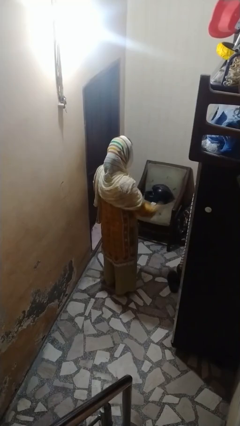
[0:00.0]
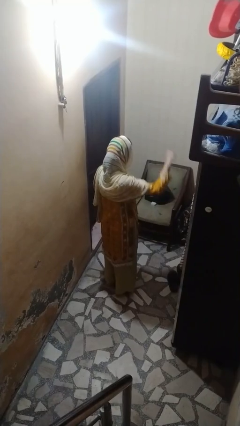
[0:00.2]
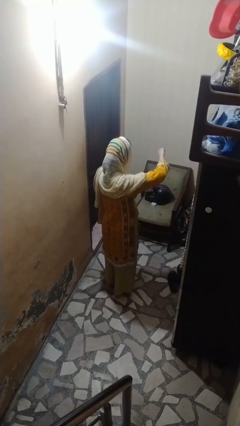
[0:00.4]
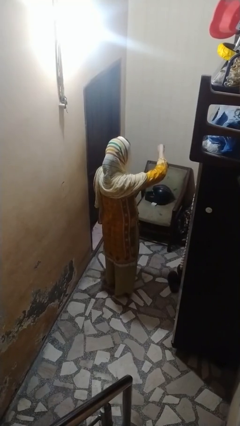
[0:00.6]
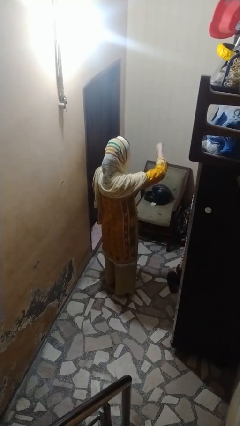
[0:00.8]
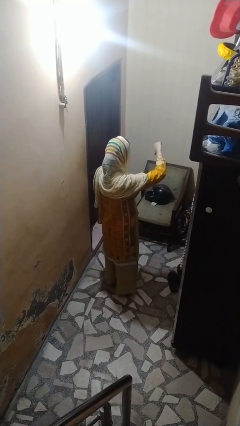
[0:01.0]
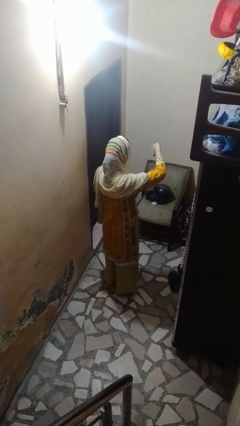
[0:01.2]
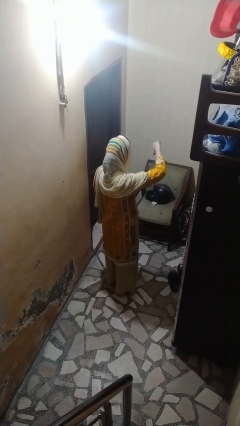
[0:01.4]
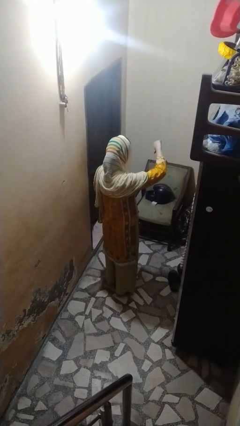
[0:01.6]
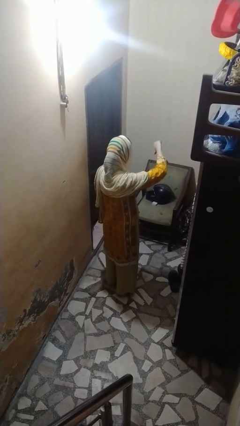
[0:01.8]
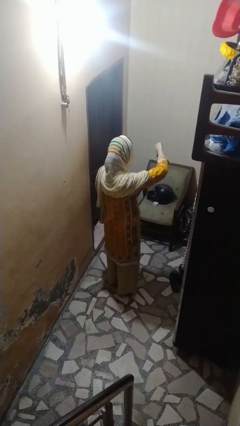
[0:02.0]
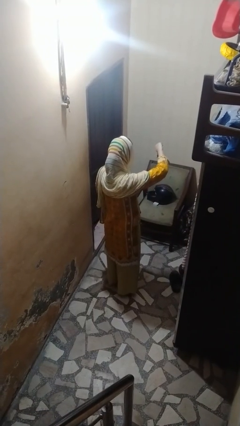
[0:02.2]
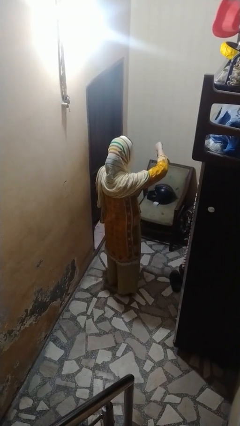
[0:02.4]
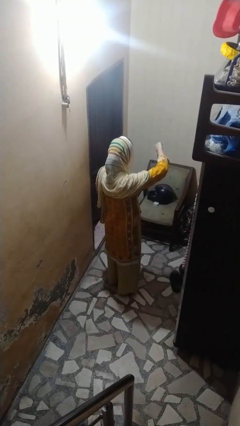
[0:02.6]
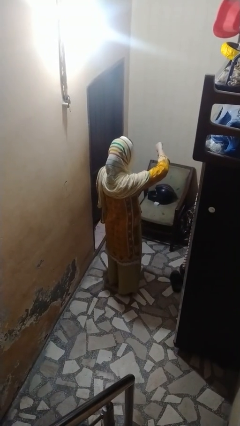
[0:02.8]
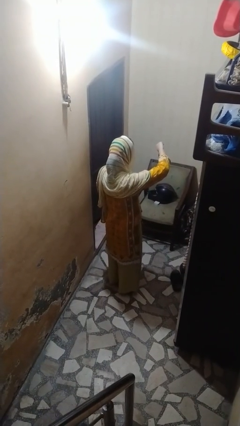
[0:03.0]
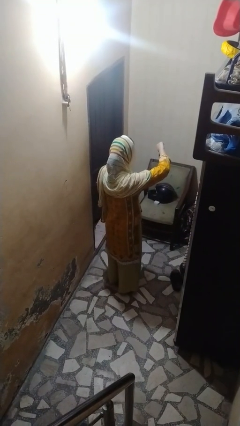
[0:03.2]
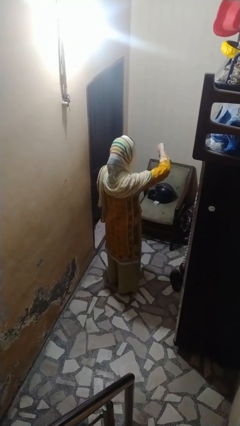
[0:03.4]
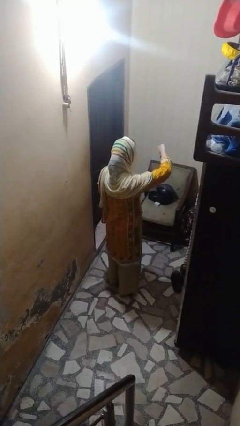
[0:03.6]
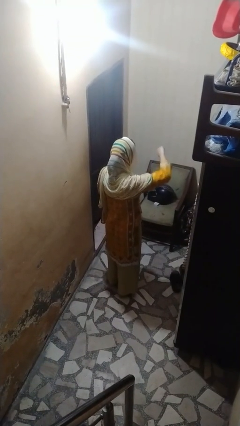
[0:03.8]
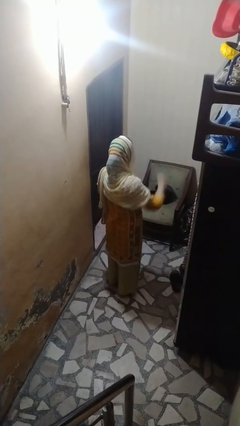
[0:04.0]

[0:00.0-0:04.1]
person gestures thumbs down

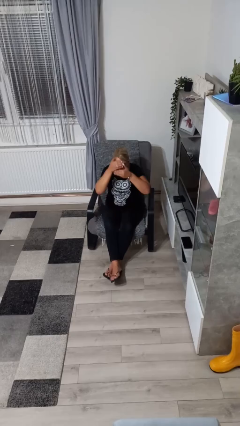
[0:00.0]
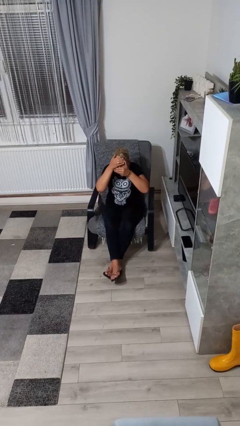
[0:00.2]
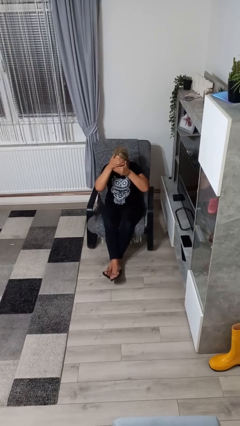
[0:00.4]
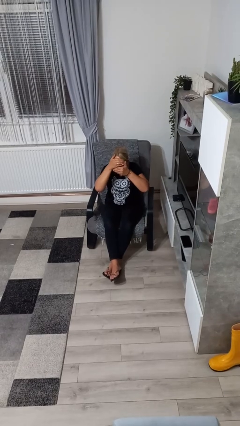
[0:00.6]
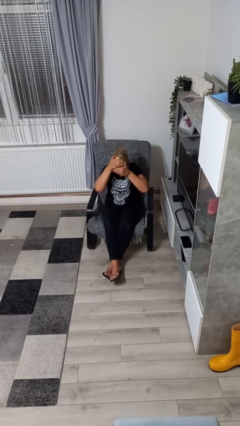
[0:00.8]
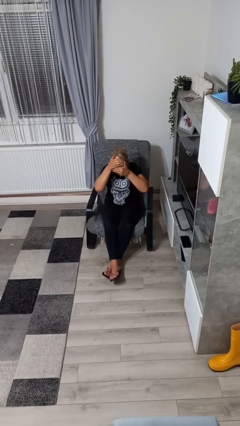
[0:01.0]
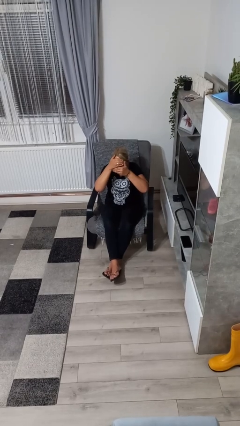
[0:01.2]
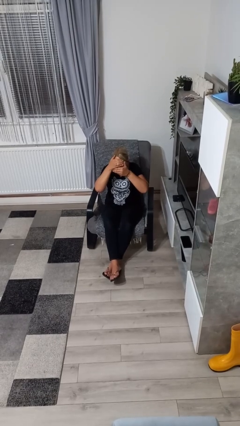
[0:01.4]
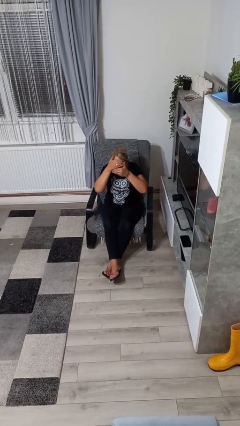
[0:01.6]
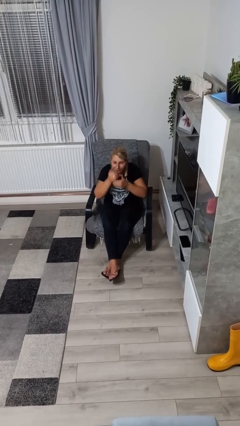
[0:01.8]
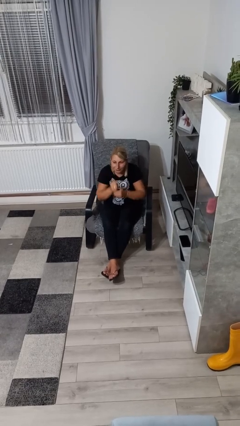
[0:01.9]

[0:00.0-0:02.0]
person covers face with hands

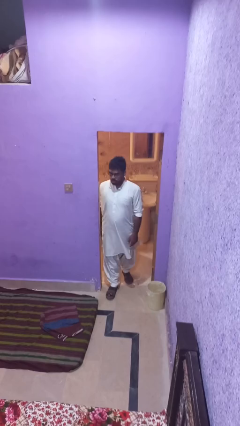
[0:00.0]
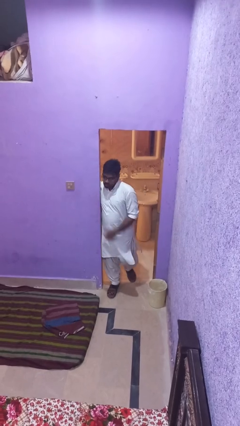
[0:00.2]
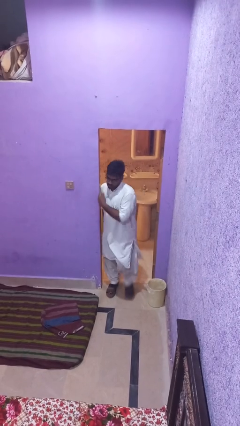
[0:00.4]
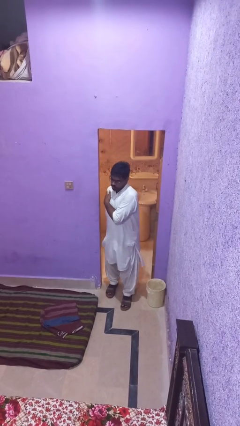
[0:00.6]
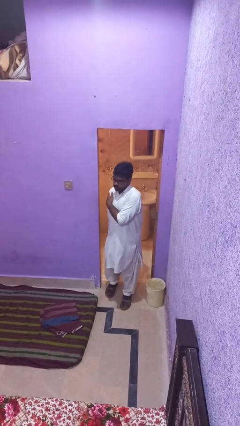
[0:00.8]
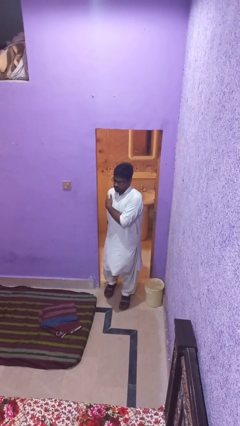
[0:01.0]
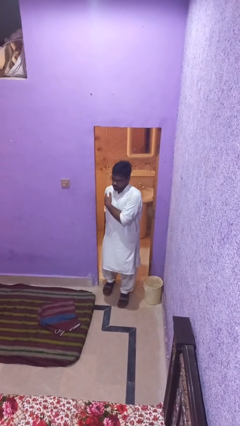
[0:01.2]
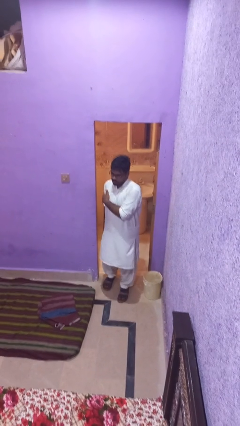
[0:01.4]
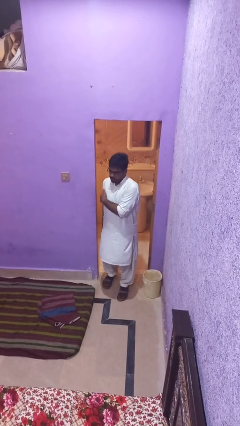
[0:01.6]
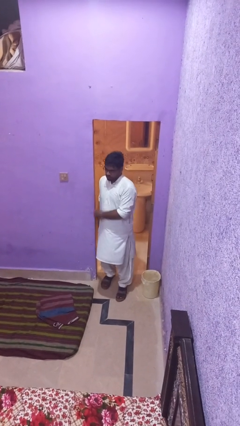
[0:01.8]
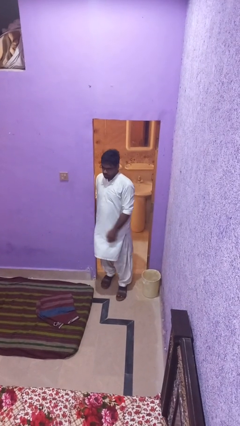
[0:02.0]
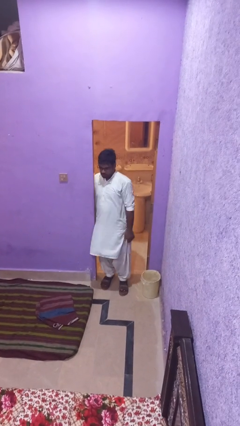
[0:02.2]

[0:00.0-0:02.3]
person bumps into wall

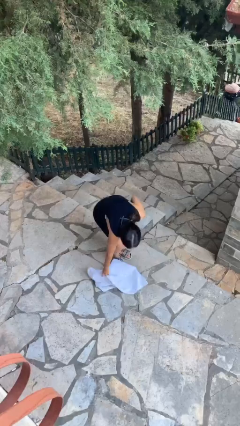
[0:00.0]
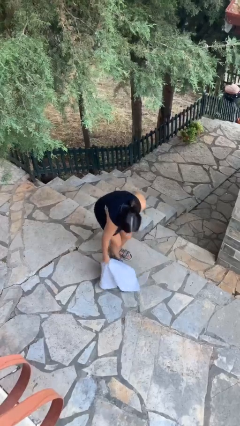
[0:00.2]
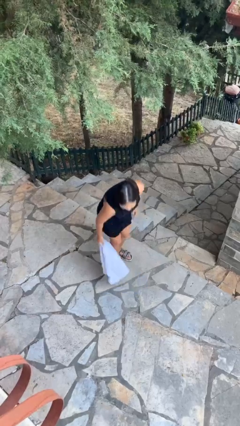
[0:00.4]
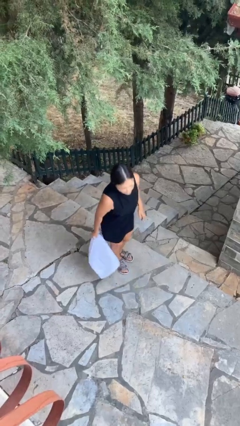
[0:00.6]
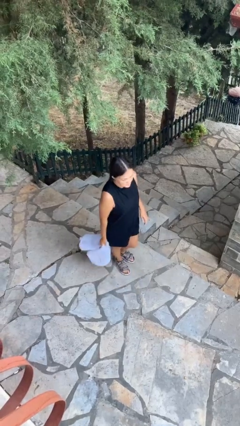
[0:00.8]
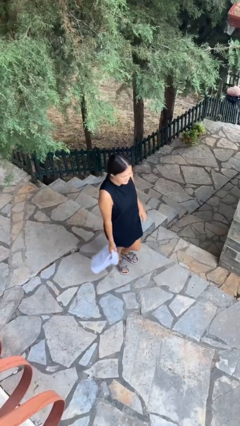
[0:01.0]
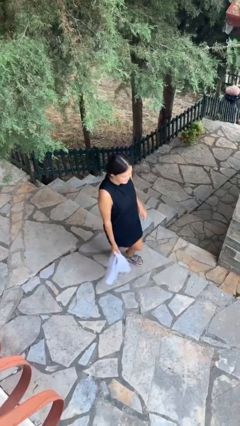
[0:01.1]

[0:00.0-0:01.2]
person picks up object from floor

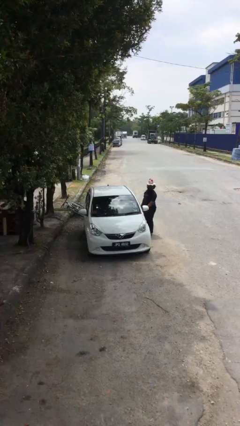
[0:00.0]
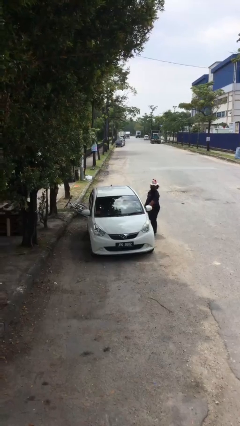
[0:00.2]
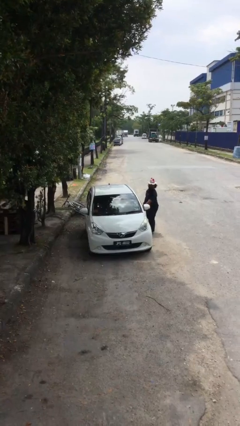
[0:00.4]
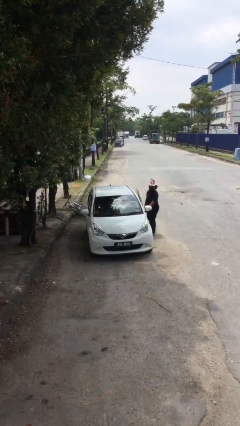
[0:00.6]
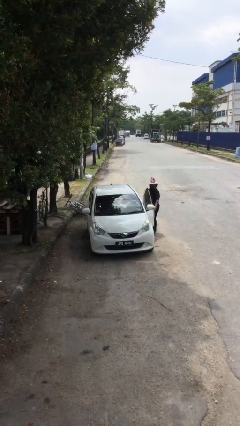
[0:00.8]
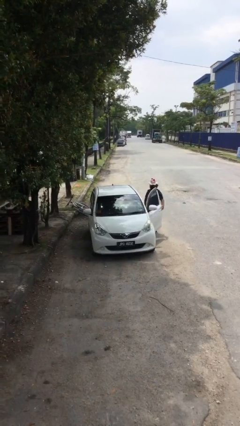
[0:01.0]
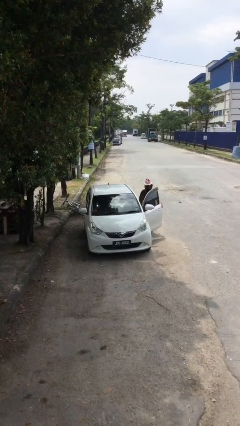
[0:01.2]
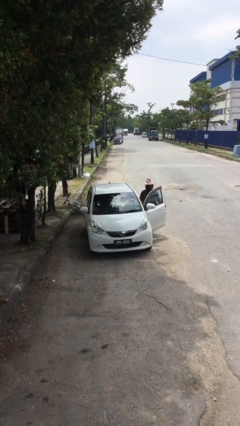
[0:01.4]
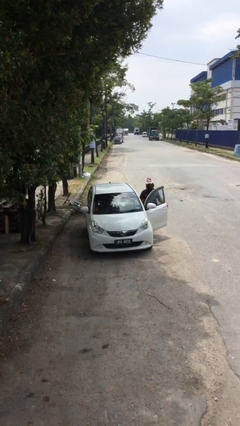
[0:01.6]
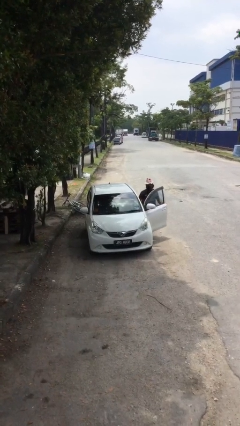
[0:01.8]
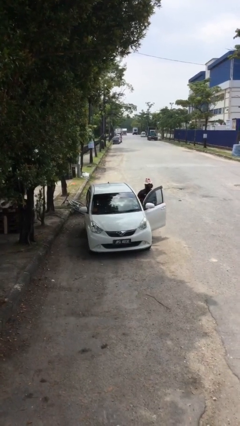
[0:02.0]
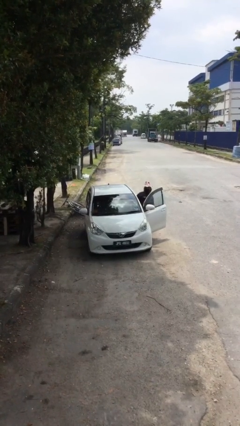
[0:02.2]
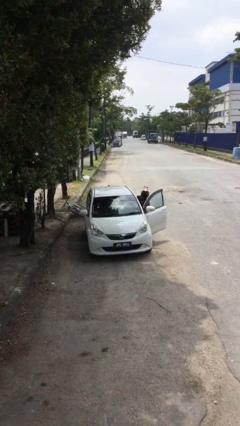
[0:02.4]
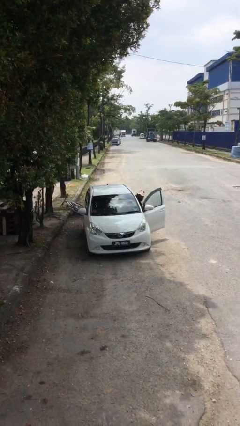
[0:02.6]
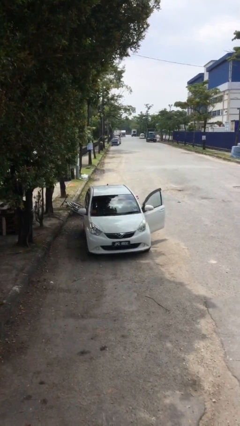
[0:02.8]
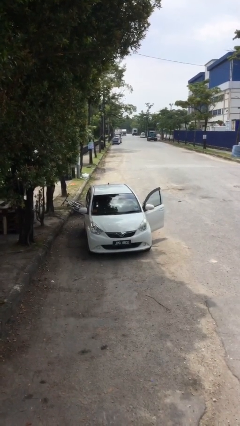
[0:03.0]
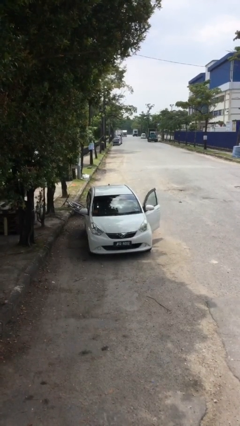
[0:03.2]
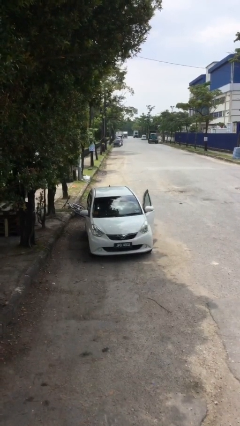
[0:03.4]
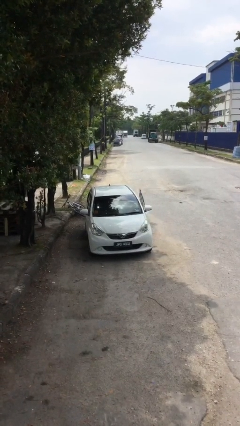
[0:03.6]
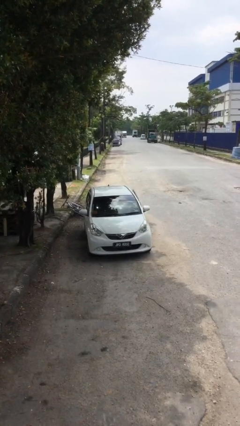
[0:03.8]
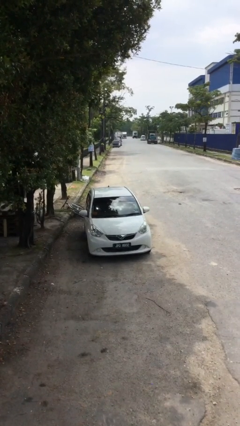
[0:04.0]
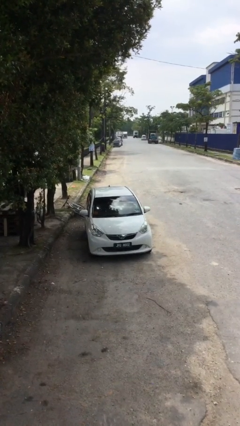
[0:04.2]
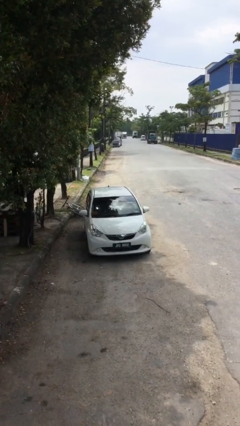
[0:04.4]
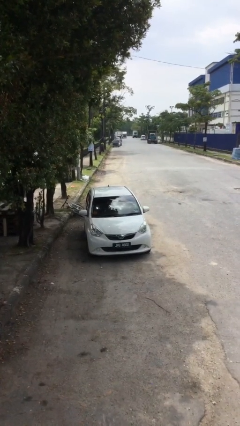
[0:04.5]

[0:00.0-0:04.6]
car picks up person

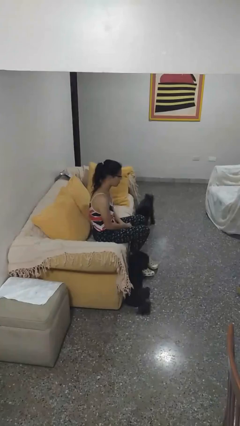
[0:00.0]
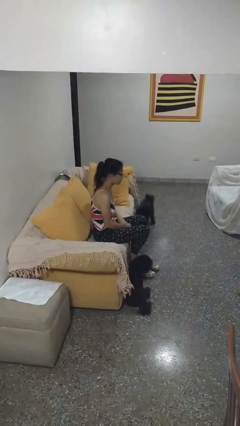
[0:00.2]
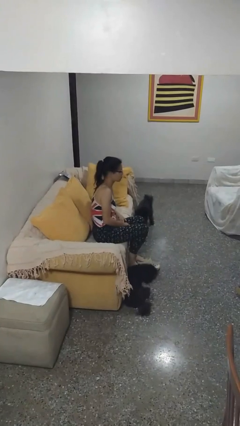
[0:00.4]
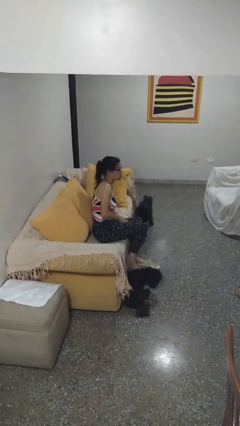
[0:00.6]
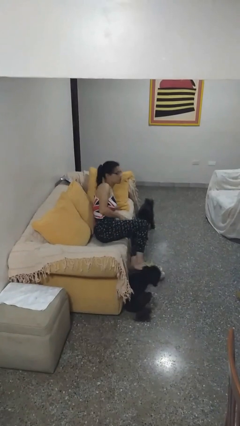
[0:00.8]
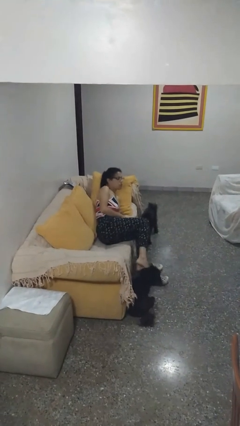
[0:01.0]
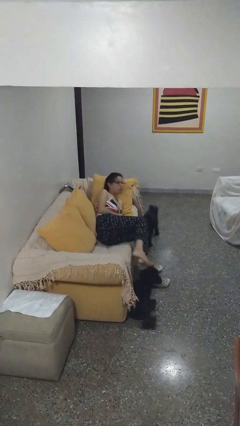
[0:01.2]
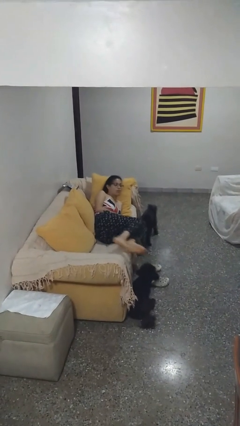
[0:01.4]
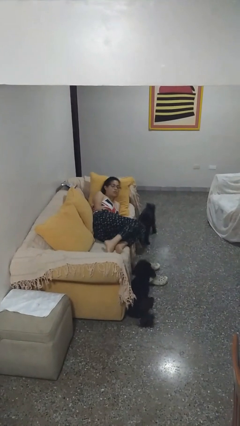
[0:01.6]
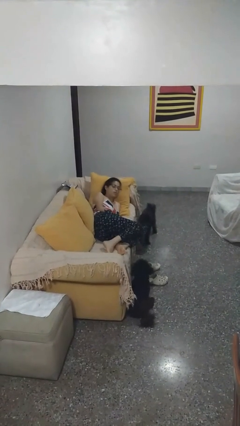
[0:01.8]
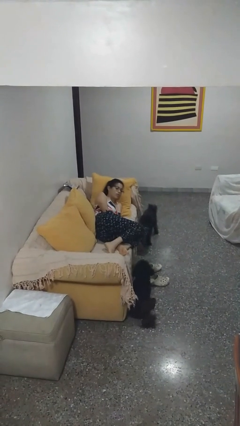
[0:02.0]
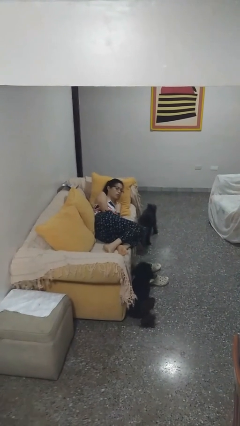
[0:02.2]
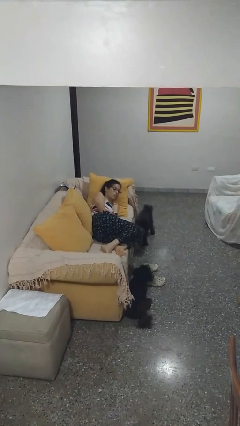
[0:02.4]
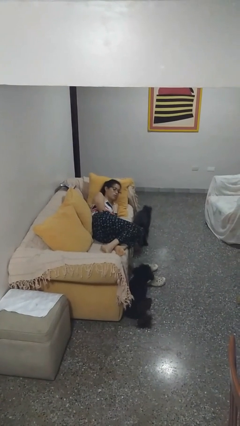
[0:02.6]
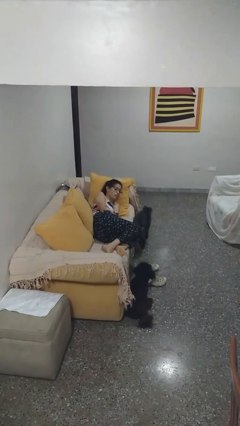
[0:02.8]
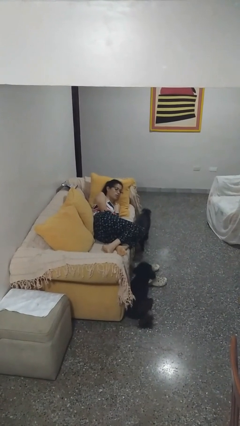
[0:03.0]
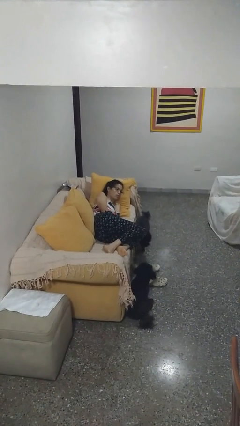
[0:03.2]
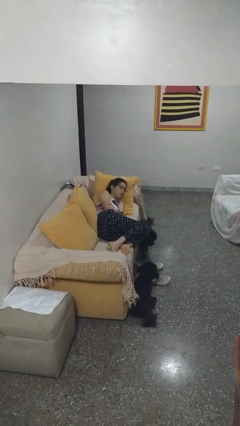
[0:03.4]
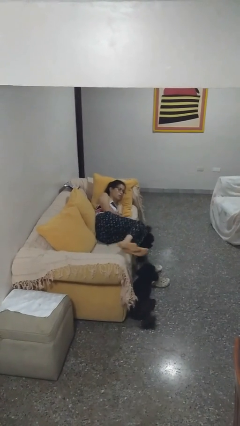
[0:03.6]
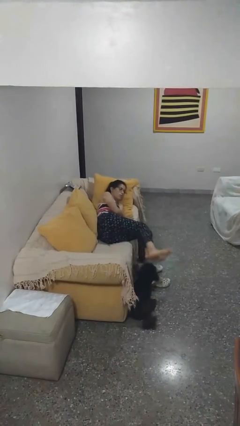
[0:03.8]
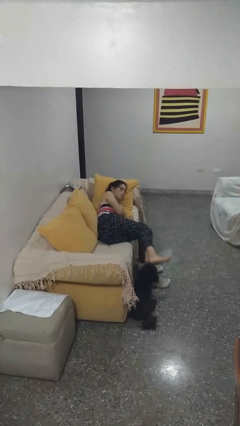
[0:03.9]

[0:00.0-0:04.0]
person lies down on couch
